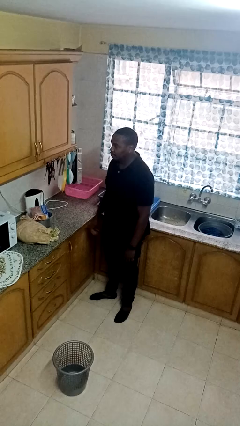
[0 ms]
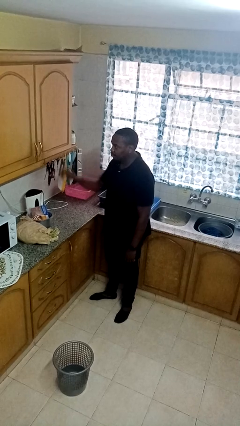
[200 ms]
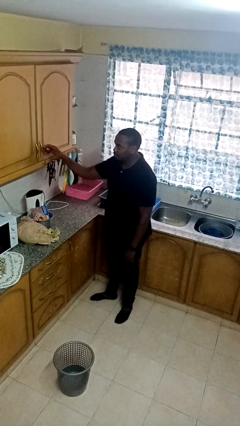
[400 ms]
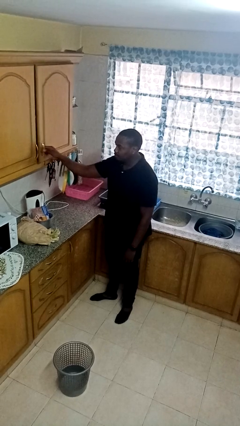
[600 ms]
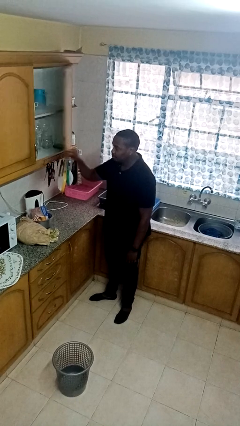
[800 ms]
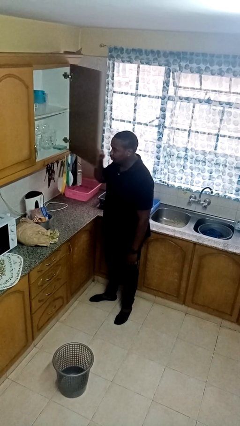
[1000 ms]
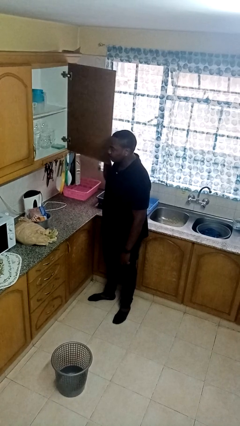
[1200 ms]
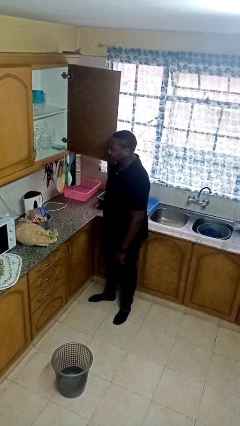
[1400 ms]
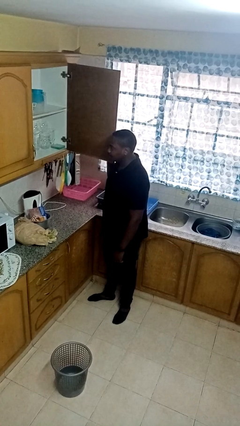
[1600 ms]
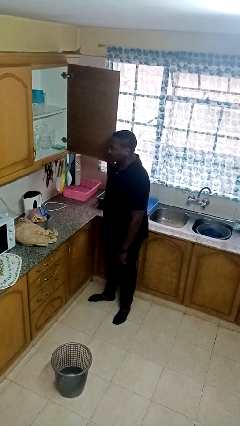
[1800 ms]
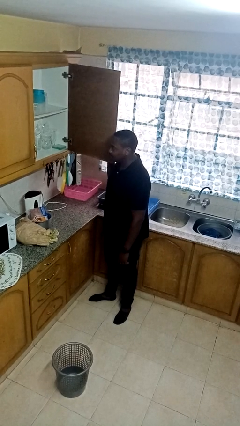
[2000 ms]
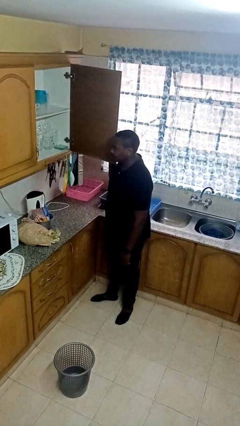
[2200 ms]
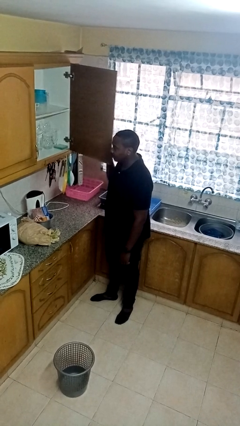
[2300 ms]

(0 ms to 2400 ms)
person opens cabinet

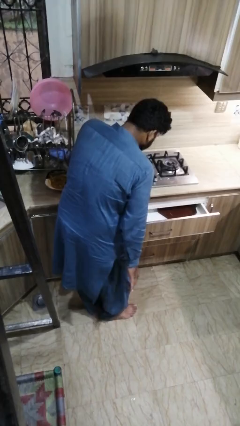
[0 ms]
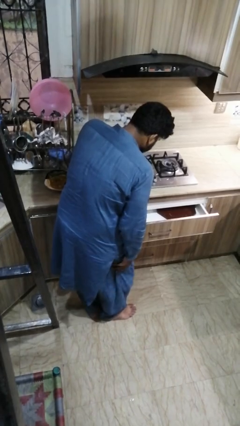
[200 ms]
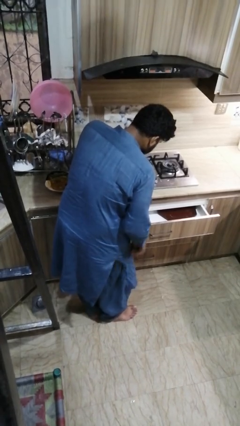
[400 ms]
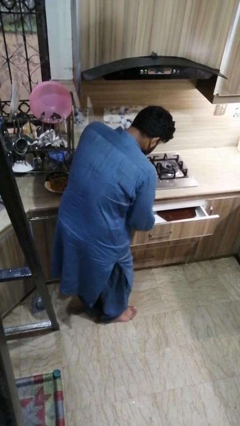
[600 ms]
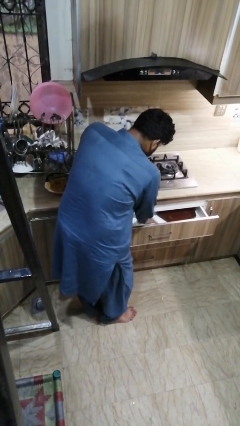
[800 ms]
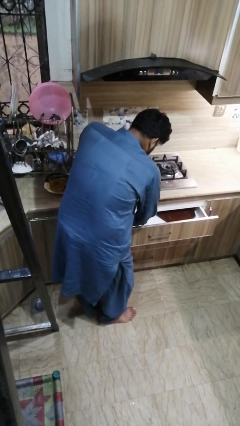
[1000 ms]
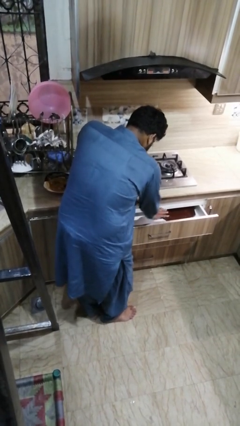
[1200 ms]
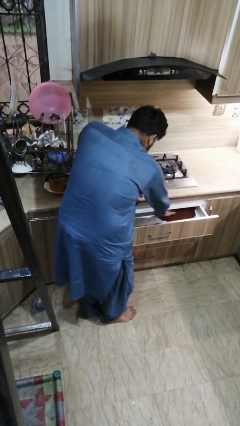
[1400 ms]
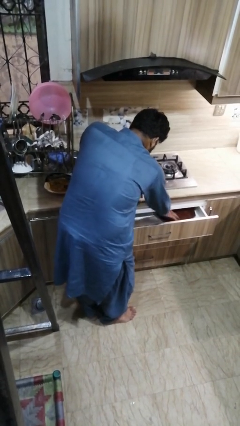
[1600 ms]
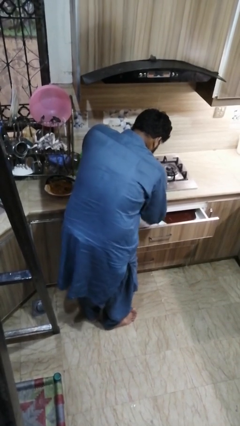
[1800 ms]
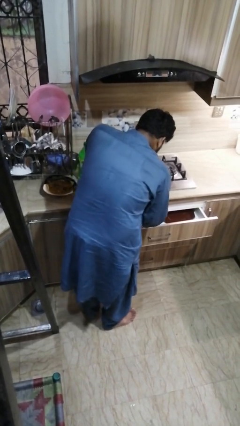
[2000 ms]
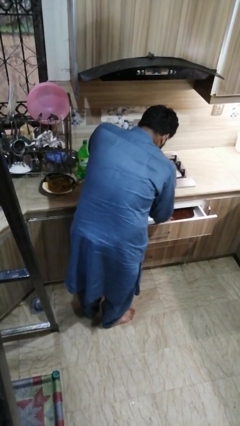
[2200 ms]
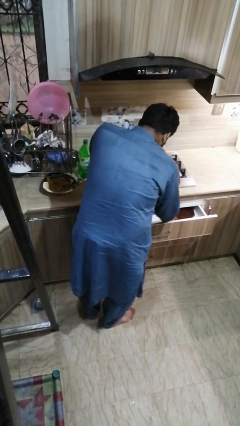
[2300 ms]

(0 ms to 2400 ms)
person searches in kitchen drawer

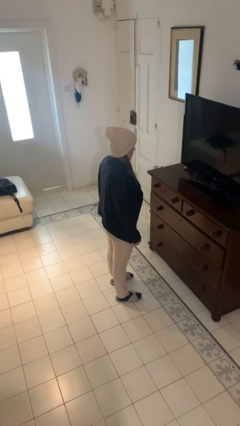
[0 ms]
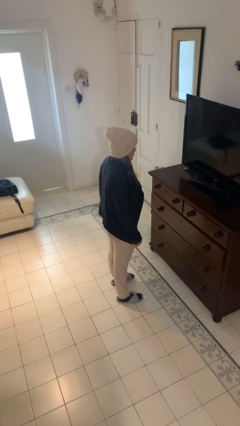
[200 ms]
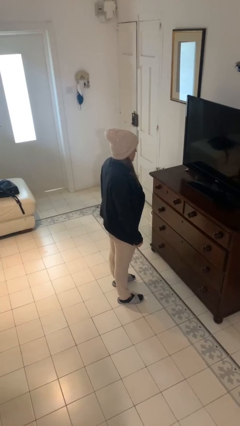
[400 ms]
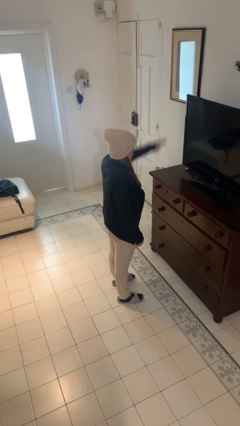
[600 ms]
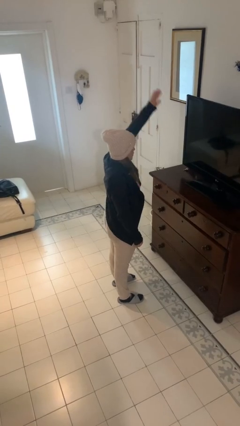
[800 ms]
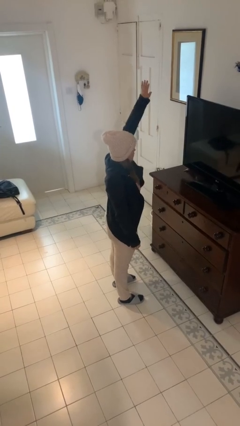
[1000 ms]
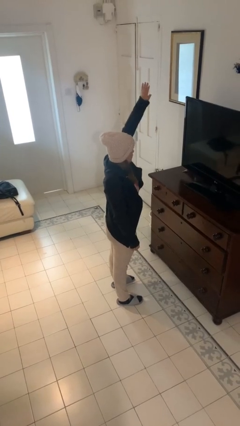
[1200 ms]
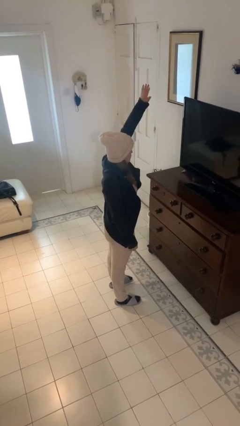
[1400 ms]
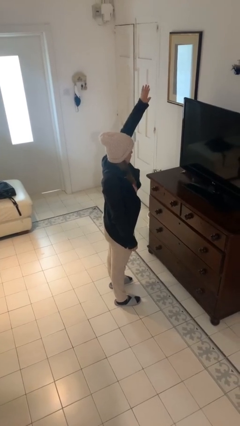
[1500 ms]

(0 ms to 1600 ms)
person gestures swipe up

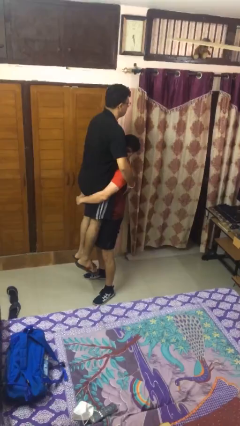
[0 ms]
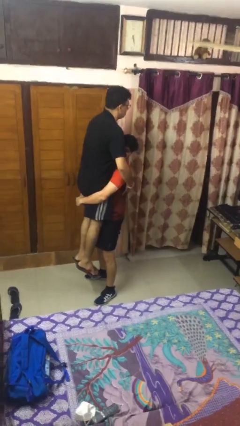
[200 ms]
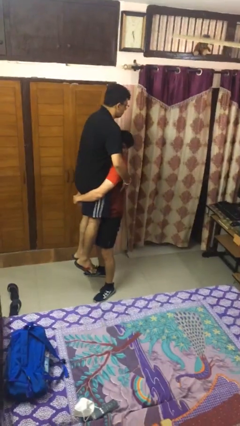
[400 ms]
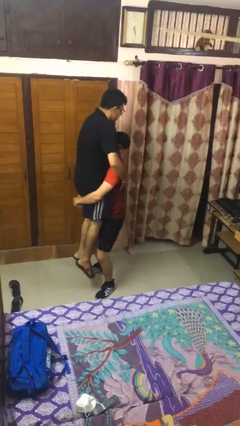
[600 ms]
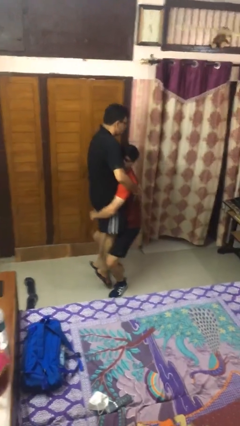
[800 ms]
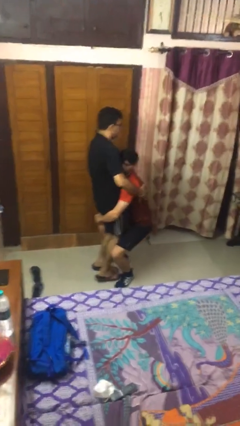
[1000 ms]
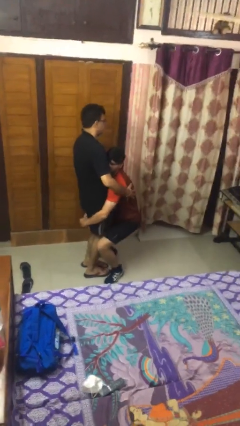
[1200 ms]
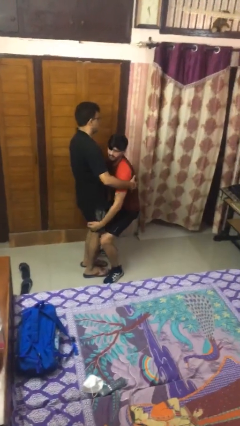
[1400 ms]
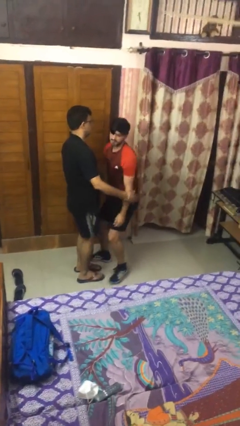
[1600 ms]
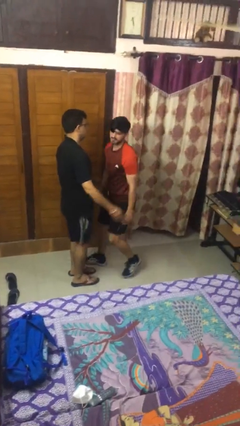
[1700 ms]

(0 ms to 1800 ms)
person puts down person

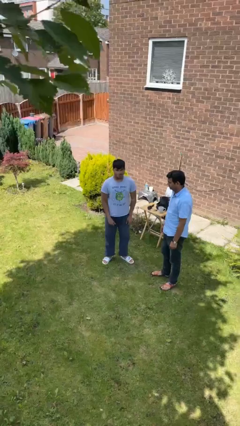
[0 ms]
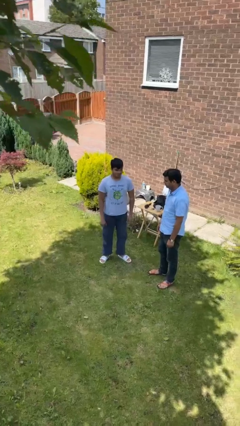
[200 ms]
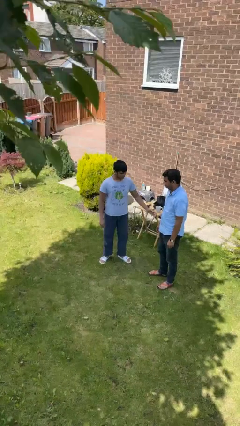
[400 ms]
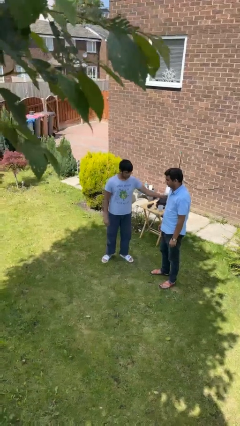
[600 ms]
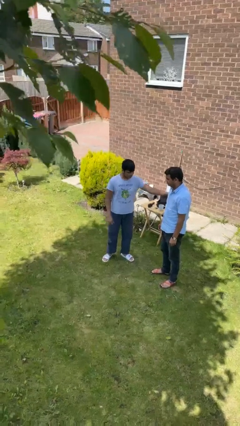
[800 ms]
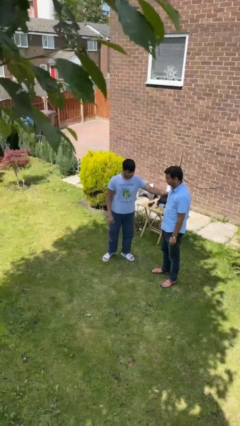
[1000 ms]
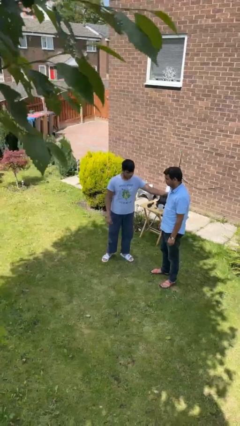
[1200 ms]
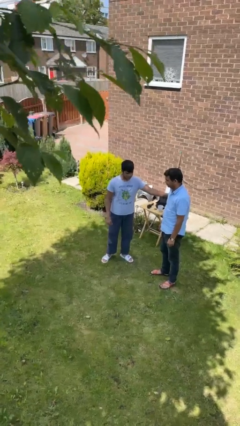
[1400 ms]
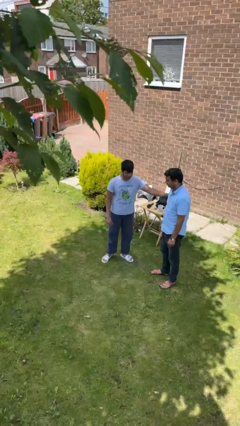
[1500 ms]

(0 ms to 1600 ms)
person grabs person by bicep

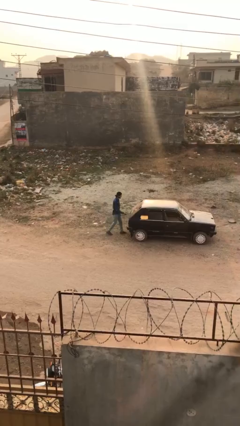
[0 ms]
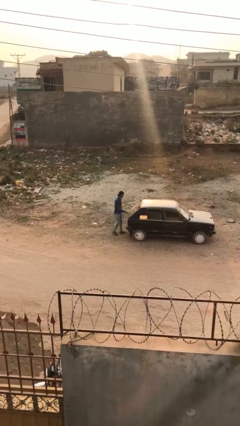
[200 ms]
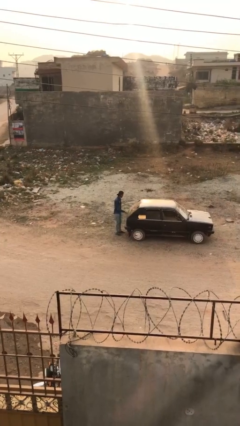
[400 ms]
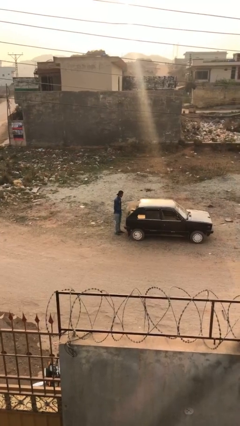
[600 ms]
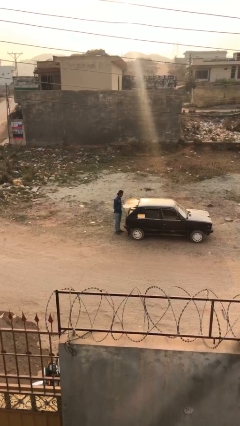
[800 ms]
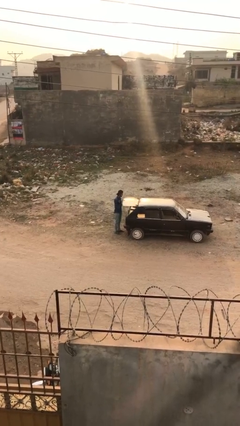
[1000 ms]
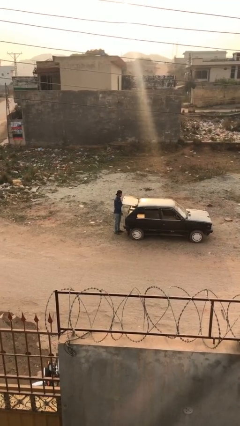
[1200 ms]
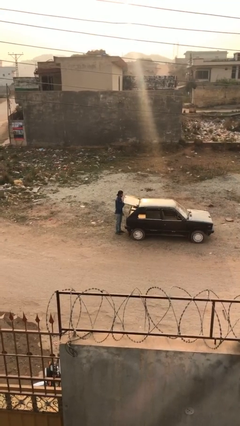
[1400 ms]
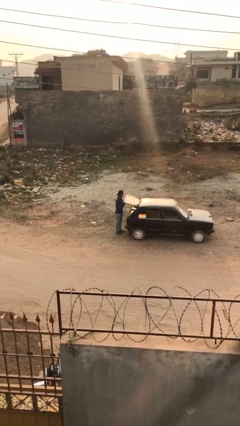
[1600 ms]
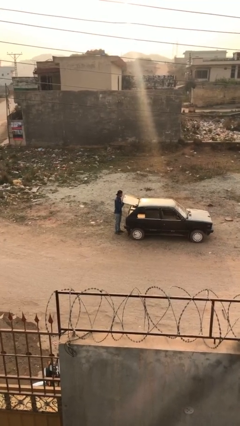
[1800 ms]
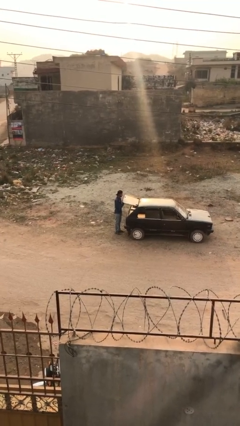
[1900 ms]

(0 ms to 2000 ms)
person opens car trunk

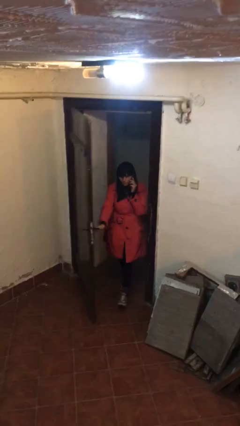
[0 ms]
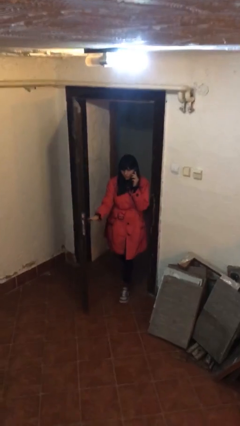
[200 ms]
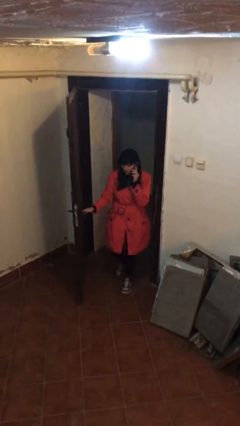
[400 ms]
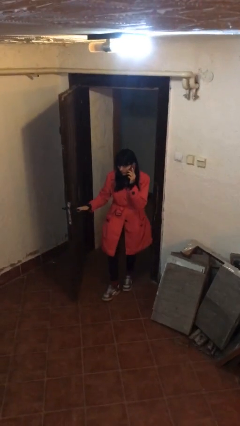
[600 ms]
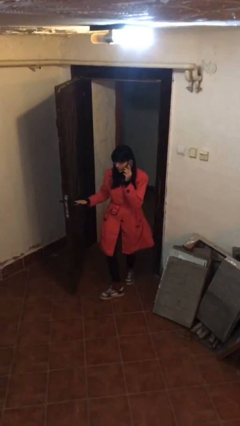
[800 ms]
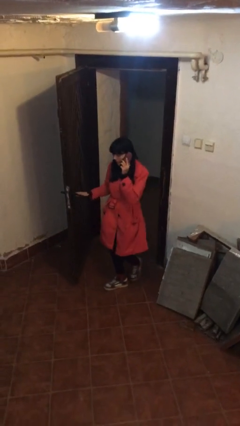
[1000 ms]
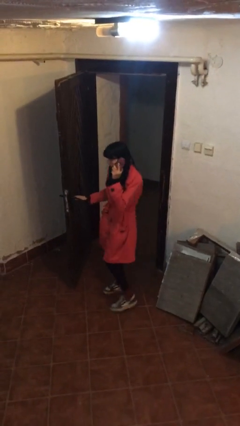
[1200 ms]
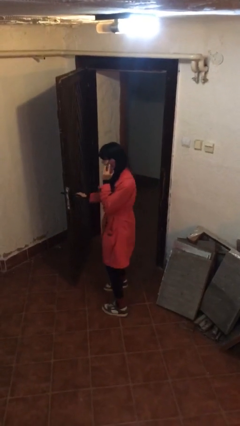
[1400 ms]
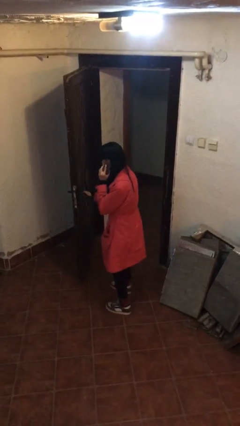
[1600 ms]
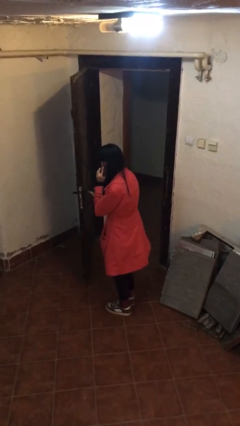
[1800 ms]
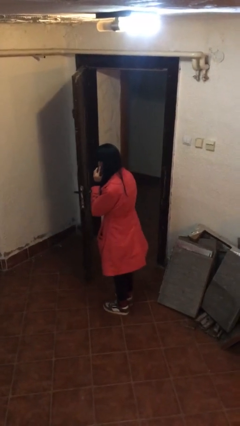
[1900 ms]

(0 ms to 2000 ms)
person enters scene through structure

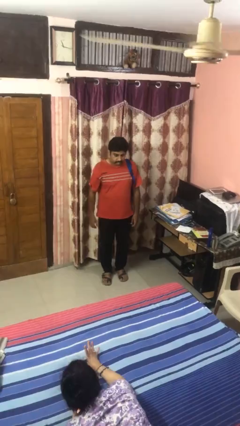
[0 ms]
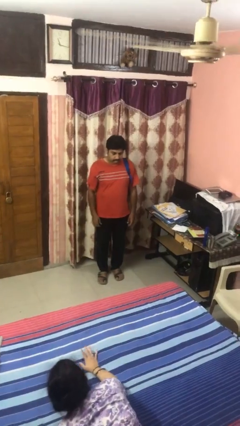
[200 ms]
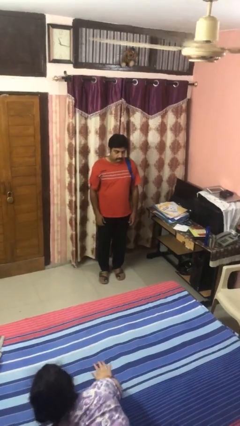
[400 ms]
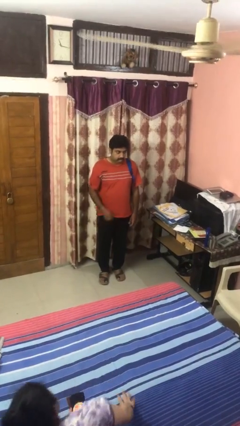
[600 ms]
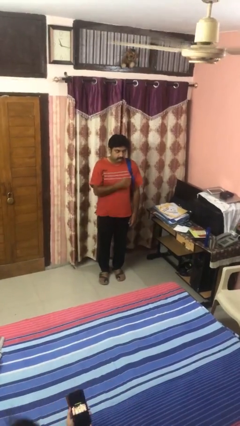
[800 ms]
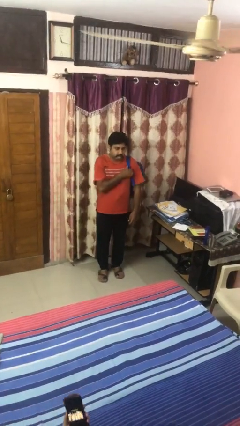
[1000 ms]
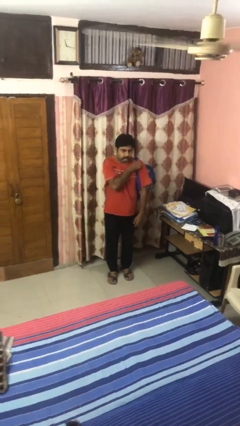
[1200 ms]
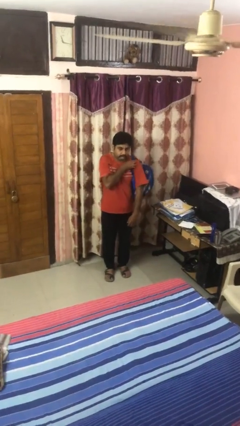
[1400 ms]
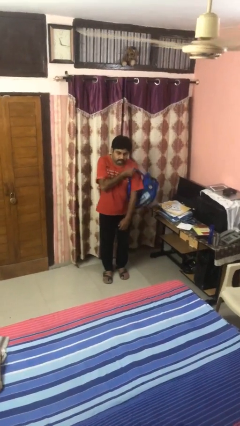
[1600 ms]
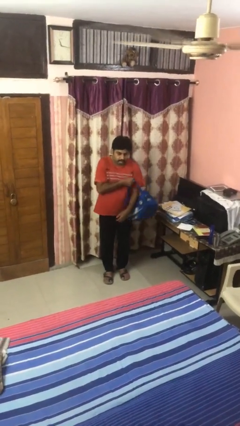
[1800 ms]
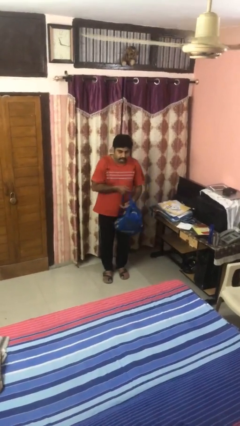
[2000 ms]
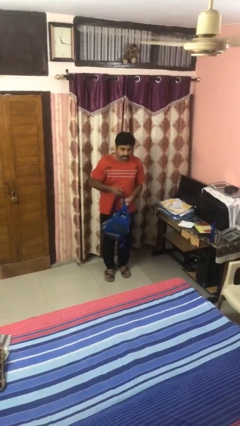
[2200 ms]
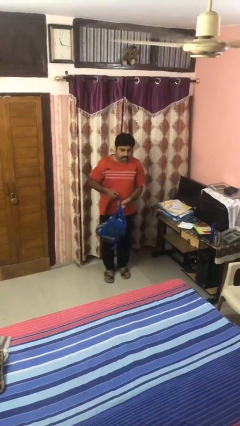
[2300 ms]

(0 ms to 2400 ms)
person takes off backpack

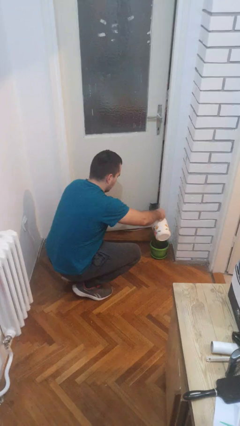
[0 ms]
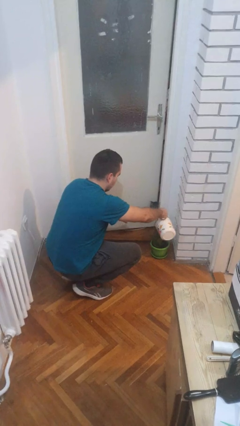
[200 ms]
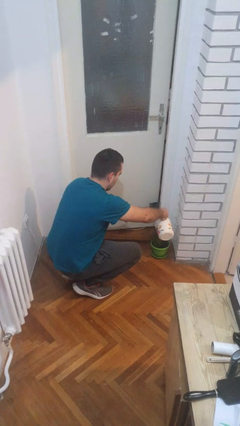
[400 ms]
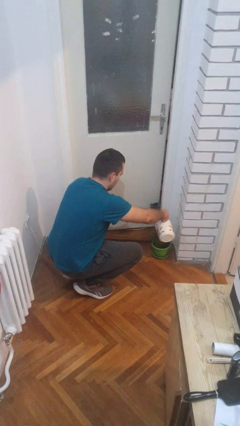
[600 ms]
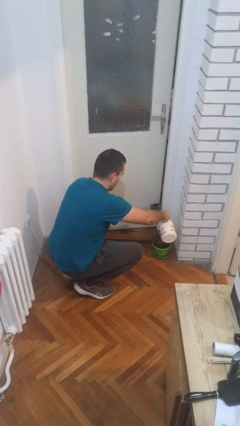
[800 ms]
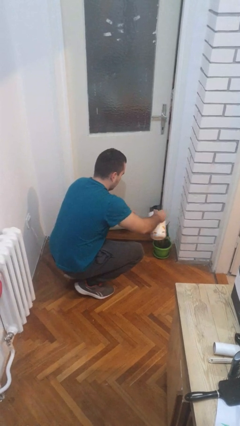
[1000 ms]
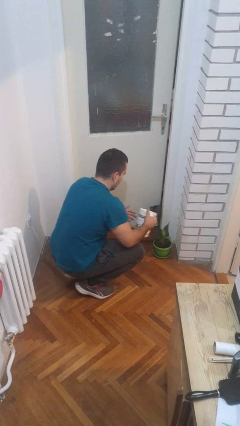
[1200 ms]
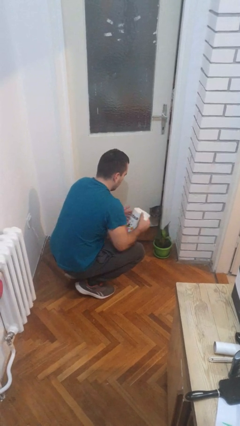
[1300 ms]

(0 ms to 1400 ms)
person waters houseplant
